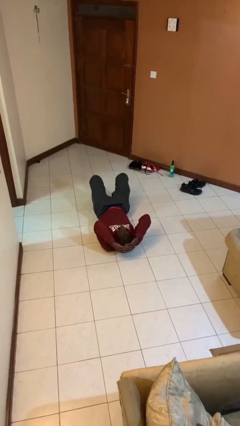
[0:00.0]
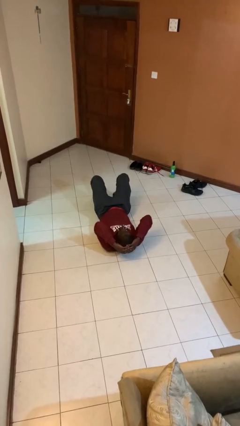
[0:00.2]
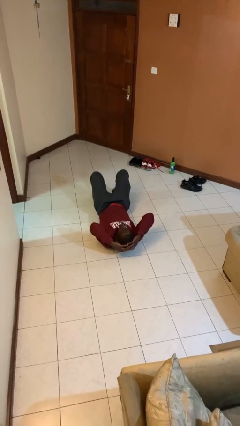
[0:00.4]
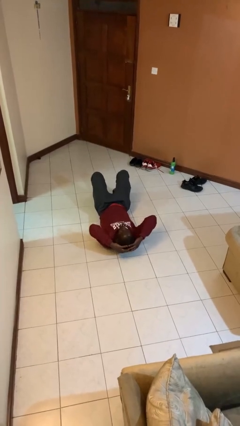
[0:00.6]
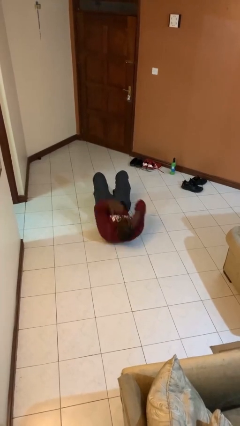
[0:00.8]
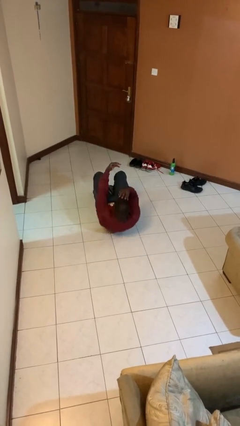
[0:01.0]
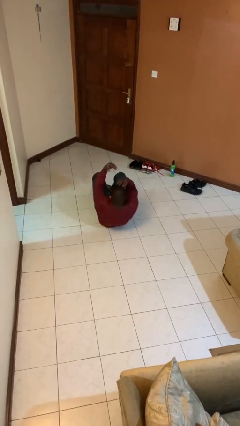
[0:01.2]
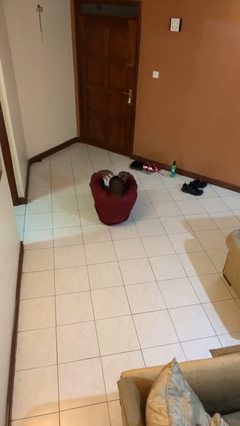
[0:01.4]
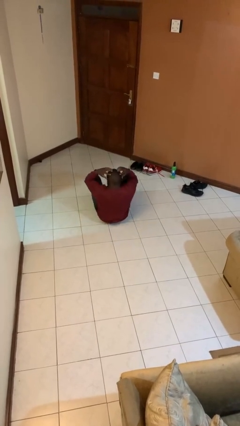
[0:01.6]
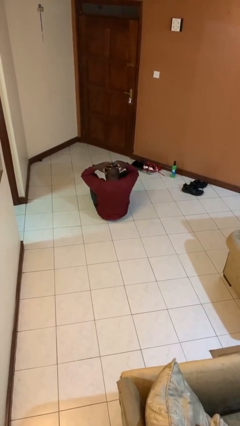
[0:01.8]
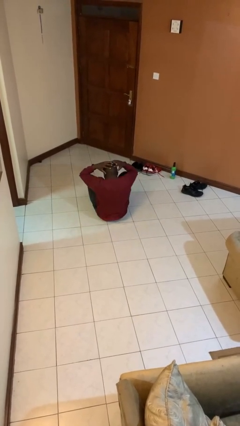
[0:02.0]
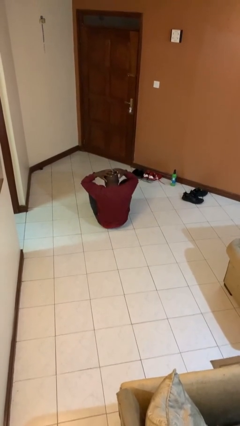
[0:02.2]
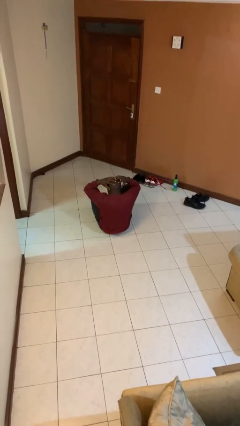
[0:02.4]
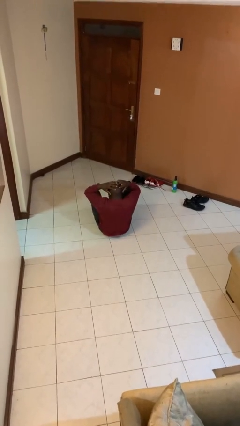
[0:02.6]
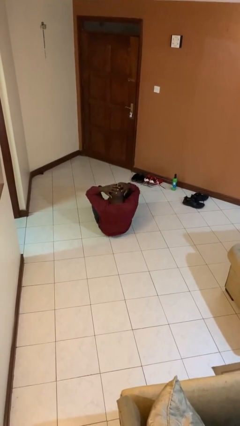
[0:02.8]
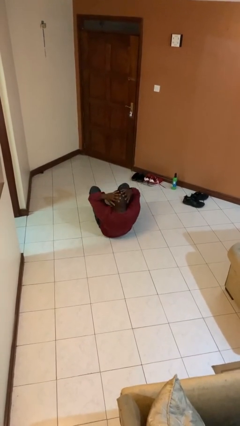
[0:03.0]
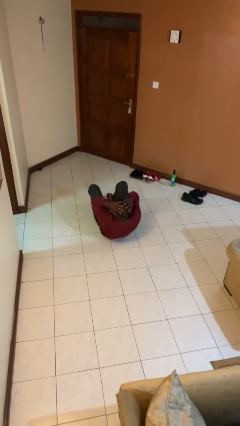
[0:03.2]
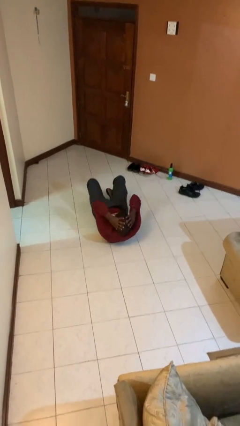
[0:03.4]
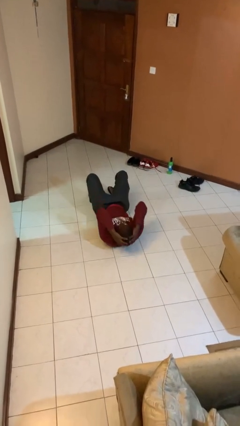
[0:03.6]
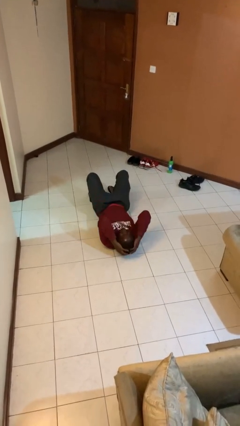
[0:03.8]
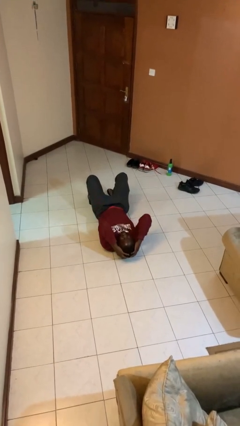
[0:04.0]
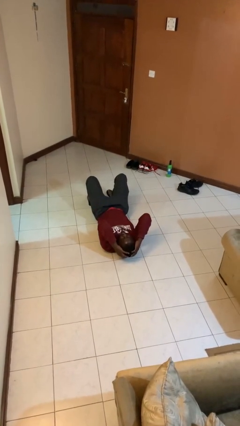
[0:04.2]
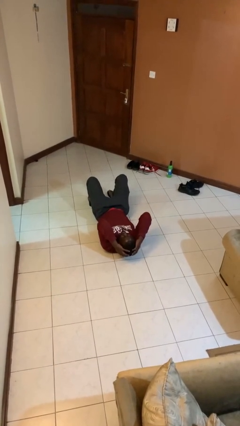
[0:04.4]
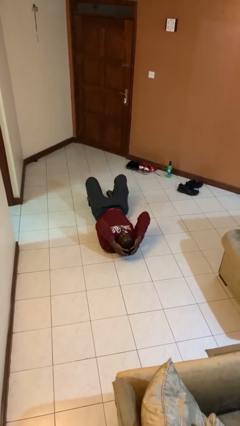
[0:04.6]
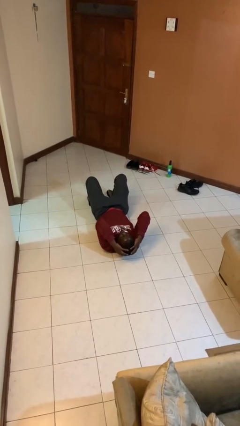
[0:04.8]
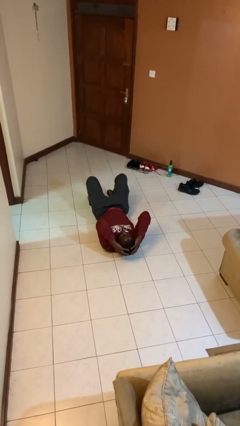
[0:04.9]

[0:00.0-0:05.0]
person exercises with situp

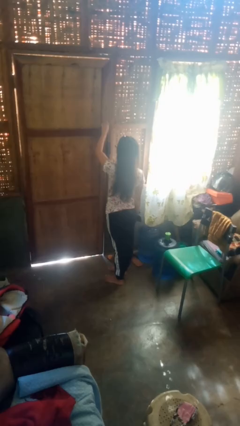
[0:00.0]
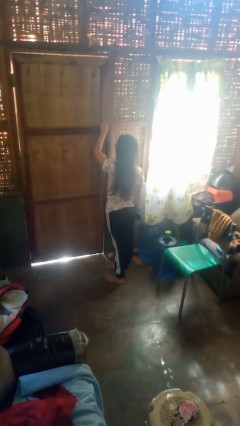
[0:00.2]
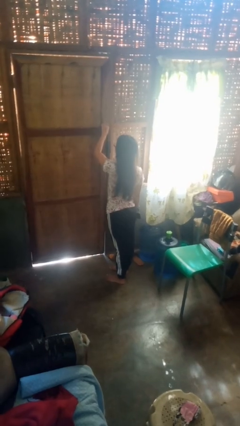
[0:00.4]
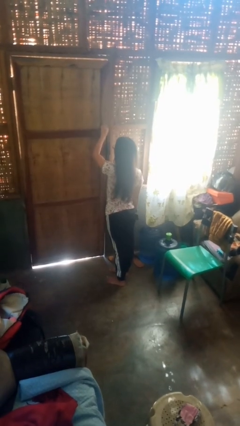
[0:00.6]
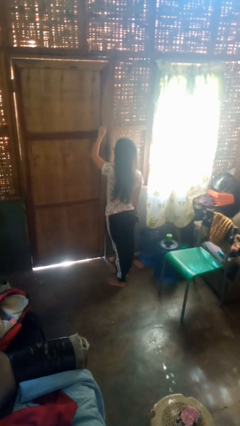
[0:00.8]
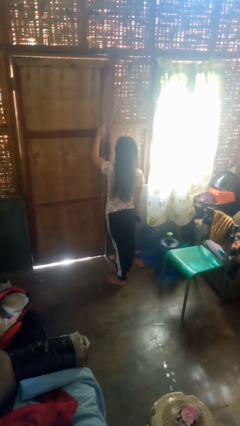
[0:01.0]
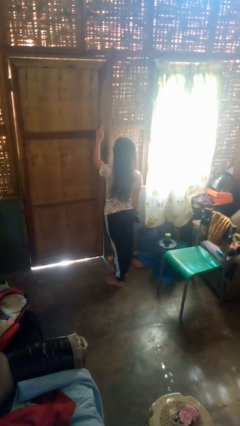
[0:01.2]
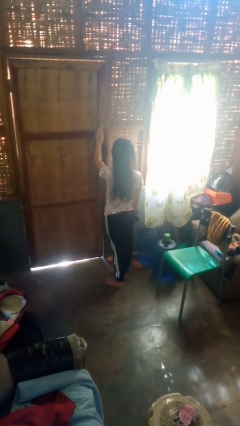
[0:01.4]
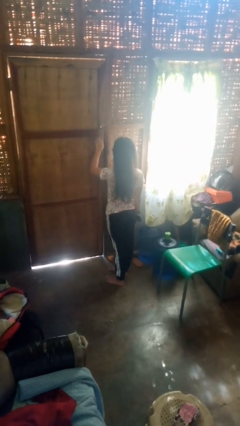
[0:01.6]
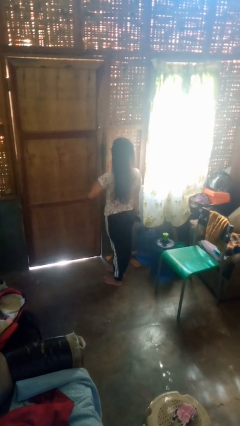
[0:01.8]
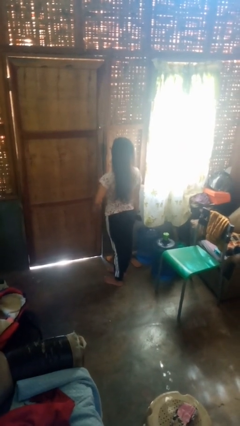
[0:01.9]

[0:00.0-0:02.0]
person unlocks door with keys

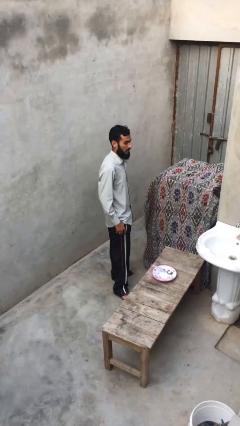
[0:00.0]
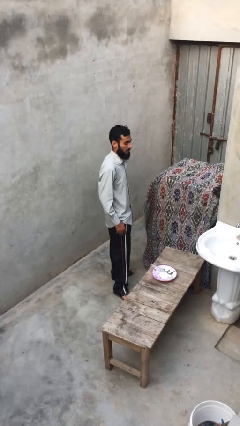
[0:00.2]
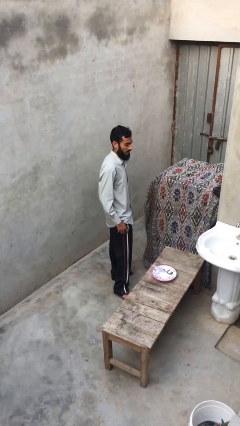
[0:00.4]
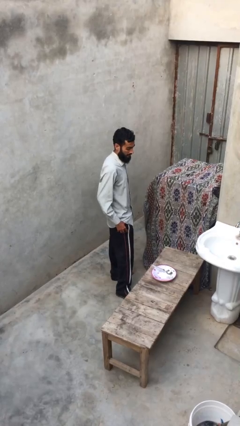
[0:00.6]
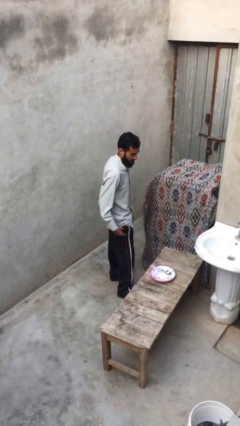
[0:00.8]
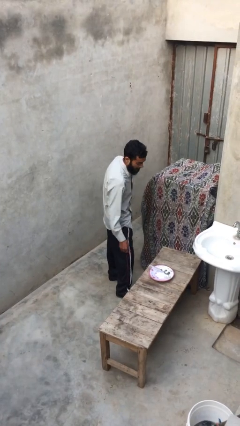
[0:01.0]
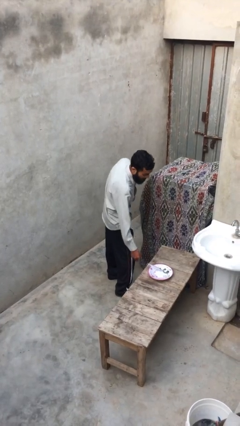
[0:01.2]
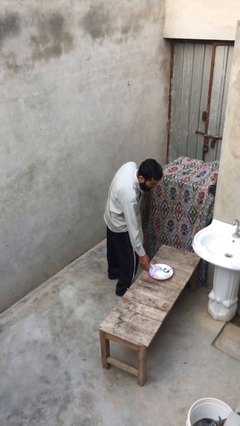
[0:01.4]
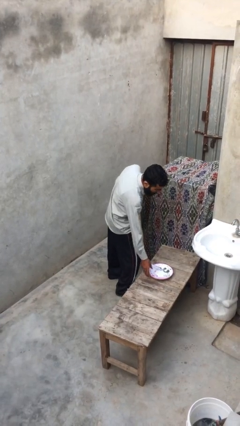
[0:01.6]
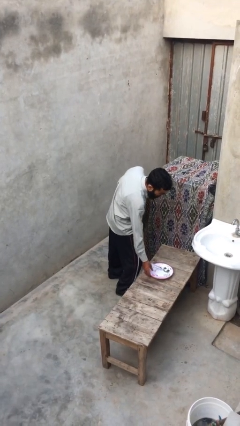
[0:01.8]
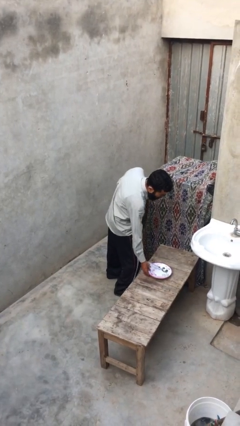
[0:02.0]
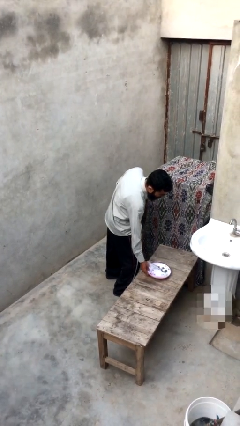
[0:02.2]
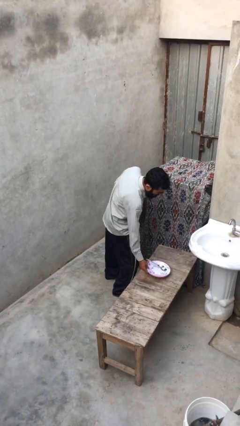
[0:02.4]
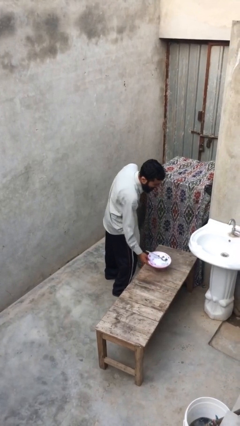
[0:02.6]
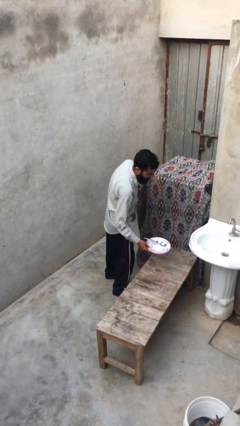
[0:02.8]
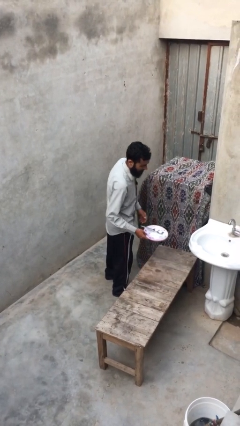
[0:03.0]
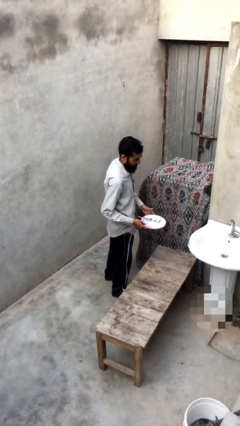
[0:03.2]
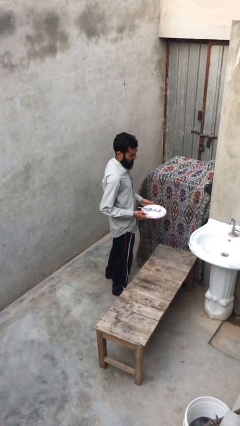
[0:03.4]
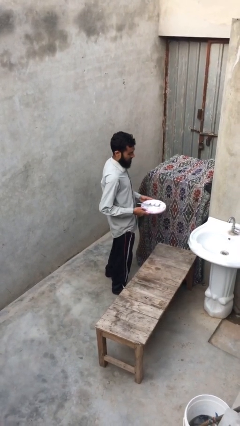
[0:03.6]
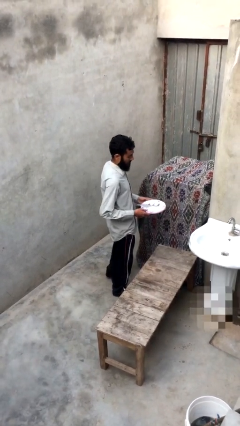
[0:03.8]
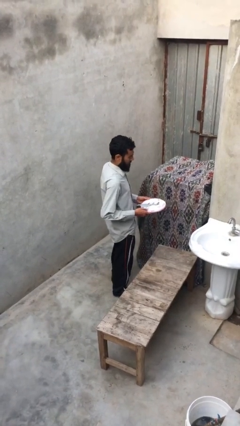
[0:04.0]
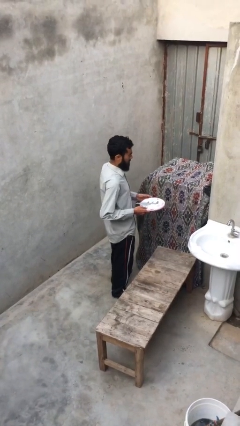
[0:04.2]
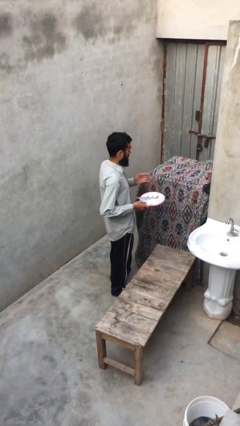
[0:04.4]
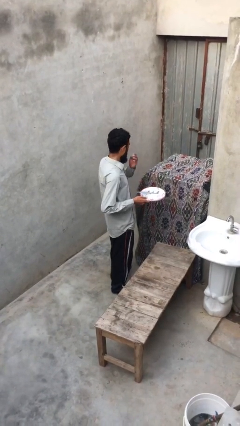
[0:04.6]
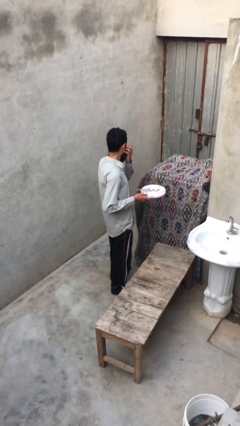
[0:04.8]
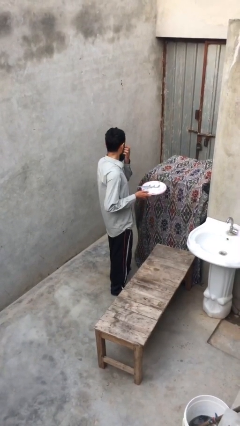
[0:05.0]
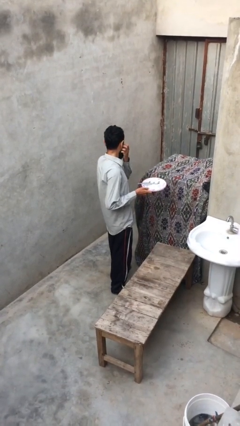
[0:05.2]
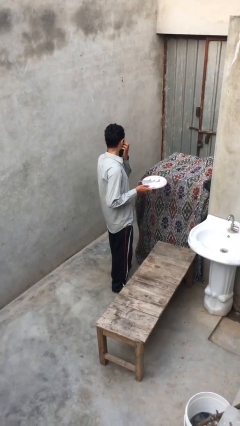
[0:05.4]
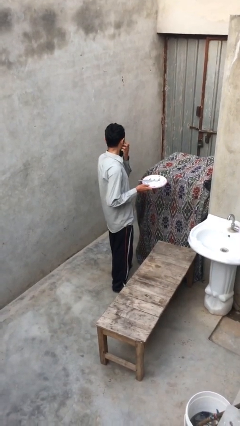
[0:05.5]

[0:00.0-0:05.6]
person picks up object from table

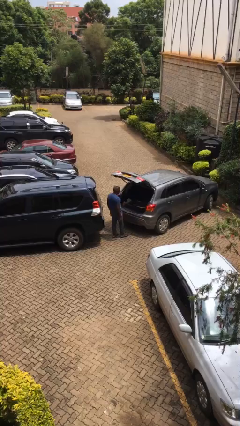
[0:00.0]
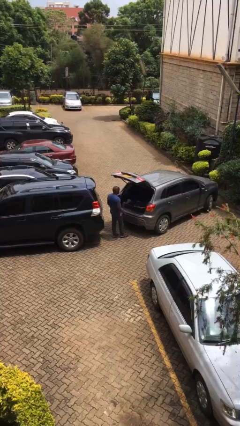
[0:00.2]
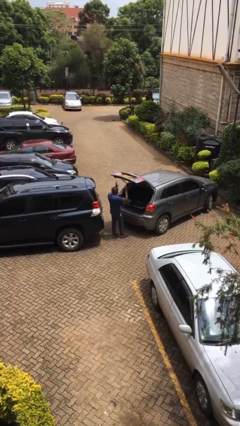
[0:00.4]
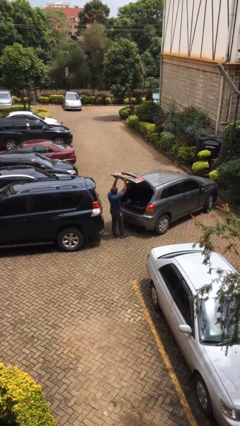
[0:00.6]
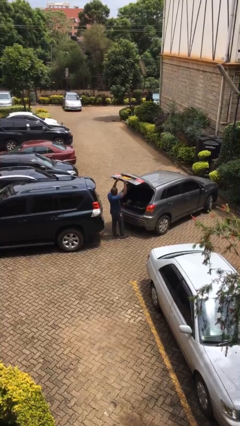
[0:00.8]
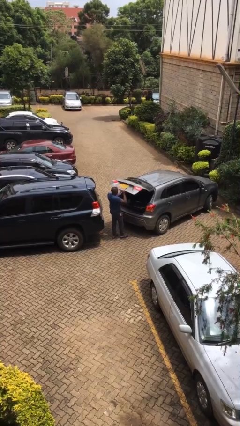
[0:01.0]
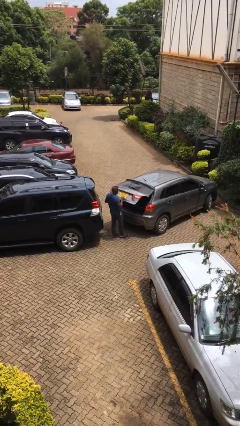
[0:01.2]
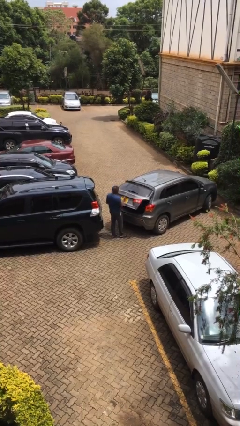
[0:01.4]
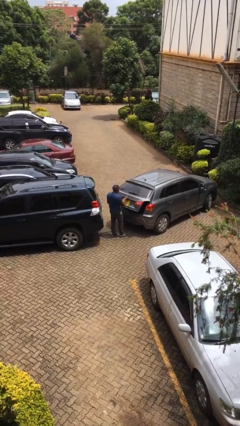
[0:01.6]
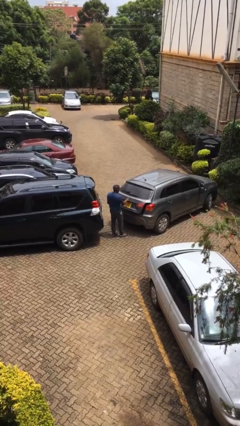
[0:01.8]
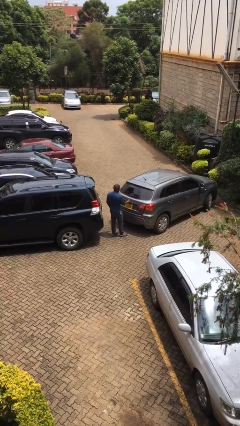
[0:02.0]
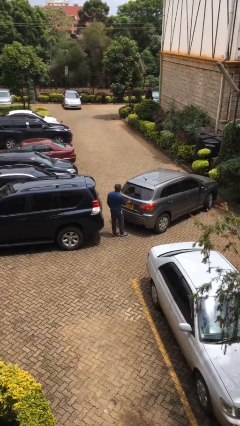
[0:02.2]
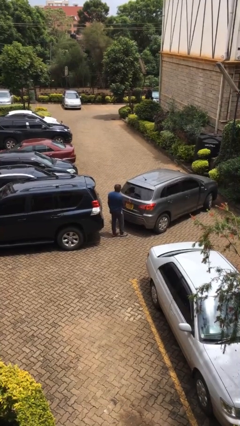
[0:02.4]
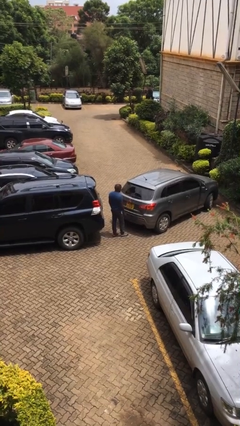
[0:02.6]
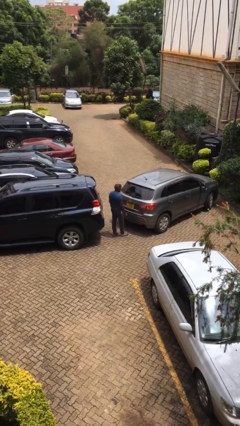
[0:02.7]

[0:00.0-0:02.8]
person closes car trunk

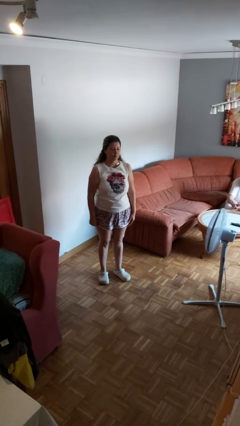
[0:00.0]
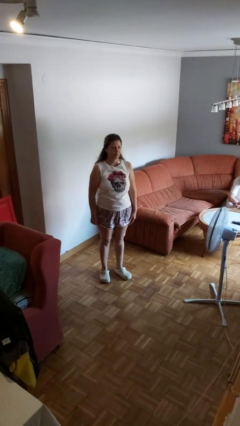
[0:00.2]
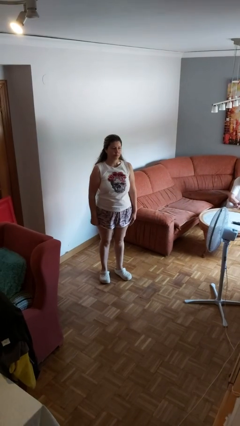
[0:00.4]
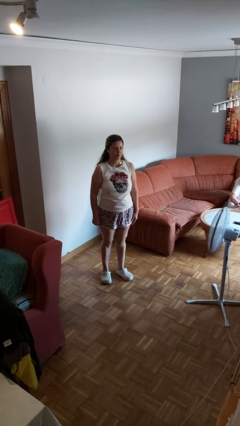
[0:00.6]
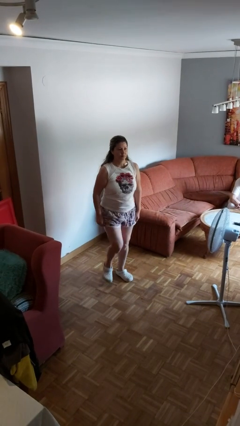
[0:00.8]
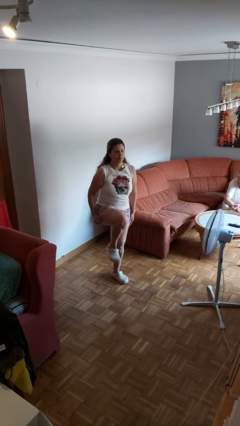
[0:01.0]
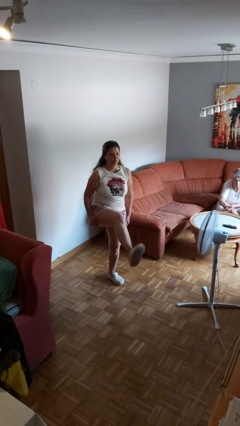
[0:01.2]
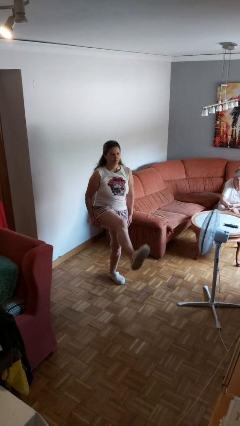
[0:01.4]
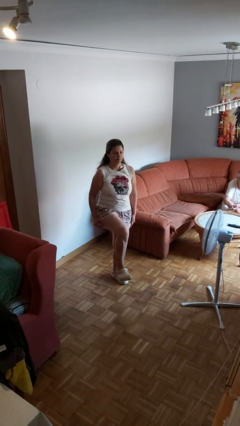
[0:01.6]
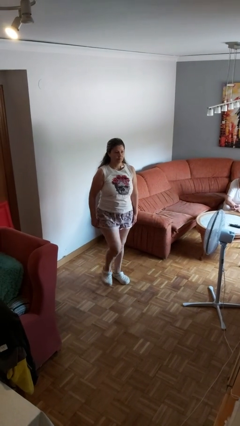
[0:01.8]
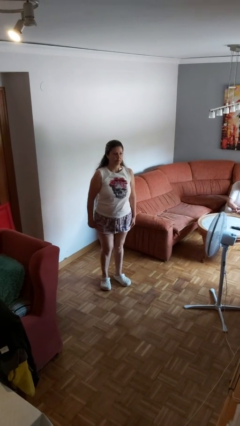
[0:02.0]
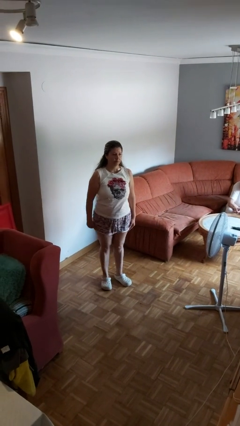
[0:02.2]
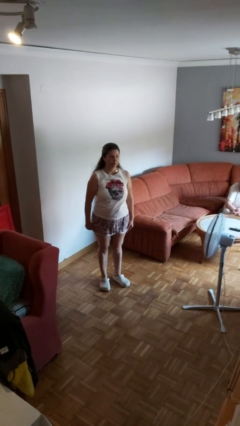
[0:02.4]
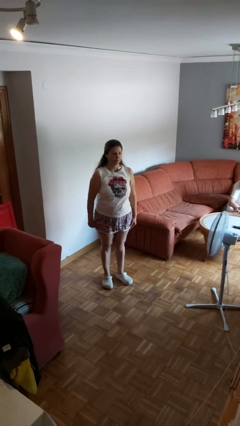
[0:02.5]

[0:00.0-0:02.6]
person karate kicks
